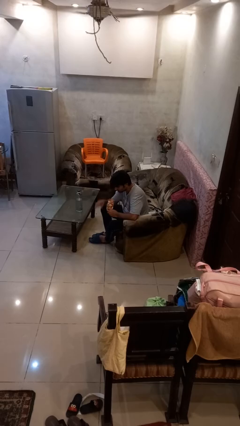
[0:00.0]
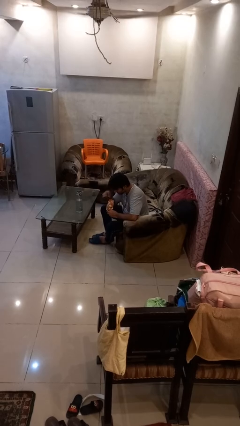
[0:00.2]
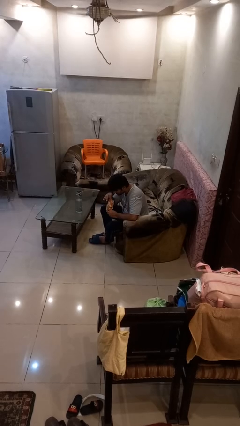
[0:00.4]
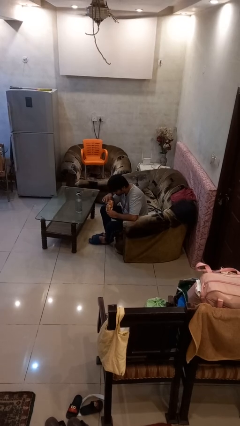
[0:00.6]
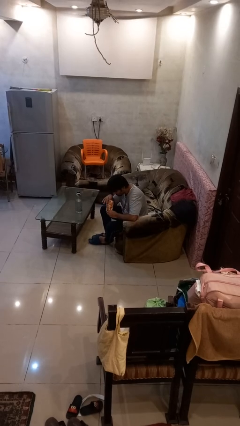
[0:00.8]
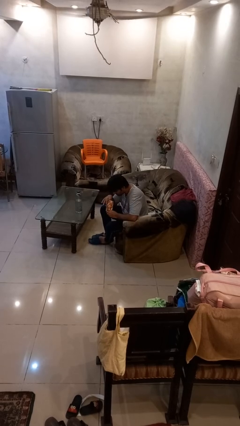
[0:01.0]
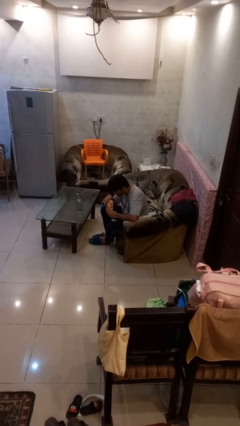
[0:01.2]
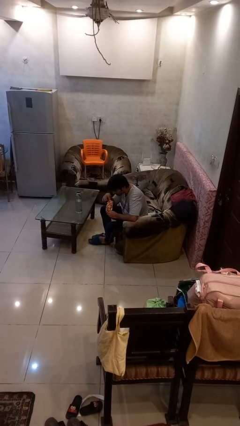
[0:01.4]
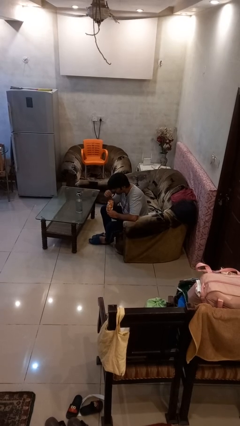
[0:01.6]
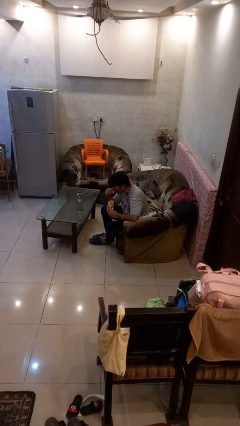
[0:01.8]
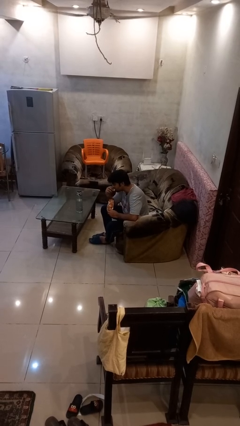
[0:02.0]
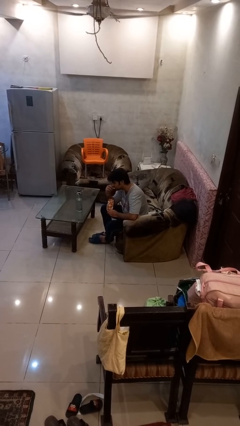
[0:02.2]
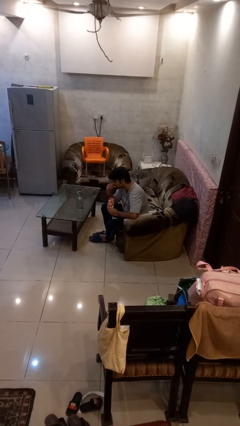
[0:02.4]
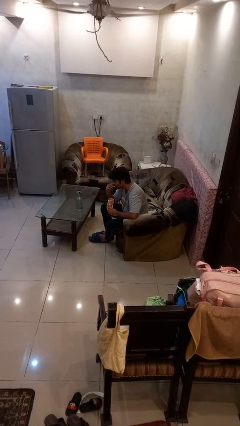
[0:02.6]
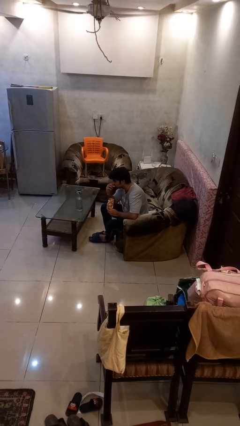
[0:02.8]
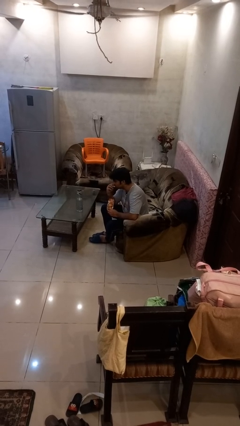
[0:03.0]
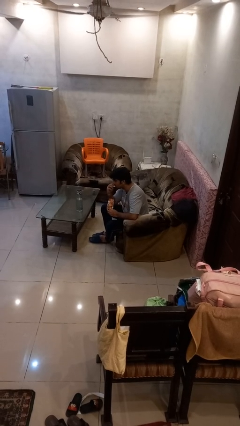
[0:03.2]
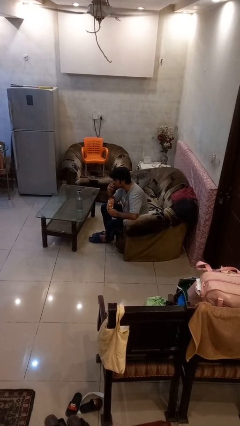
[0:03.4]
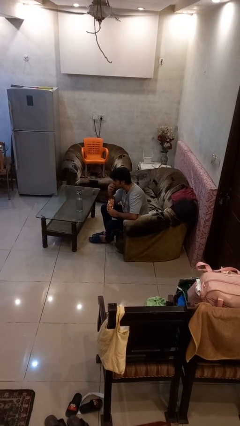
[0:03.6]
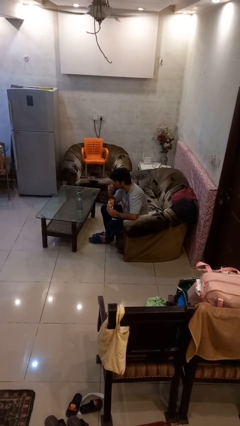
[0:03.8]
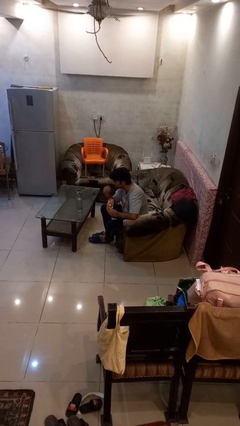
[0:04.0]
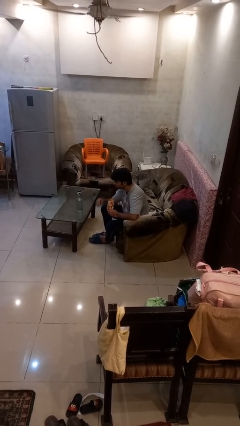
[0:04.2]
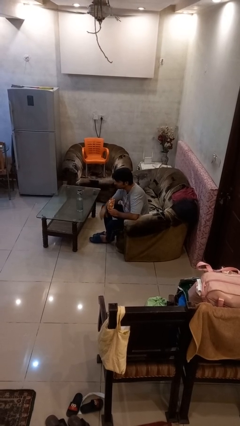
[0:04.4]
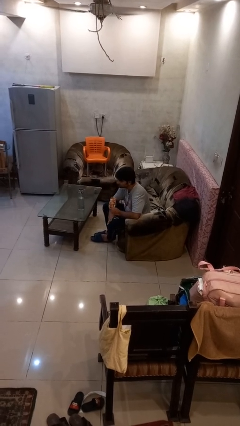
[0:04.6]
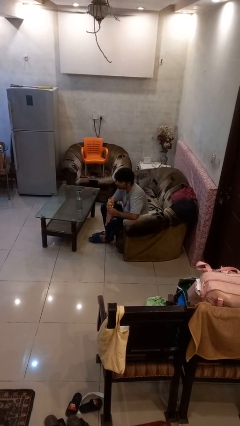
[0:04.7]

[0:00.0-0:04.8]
person eats snack from bag

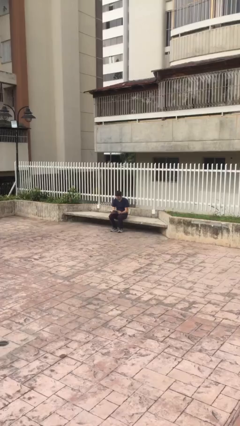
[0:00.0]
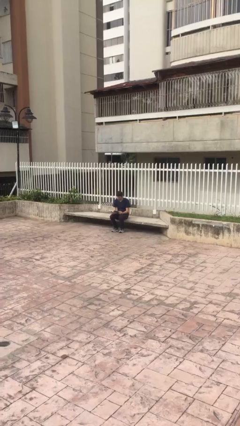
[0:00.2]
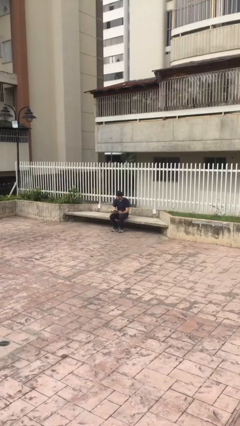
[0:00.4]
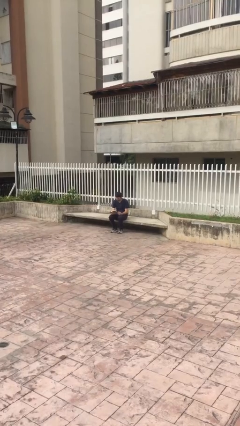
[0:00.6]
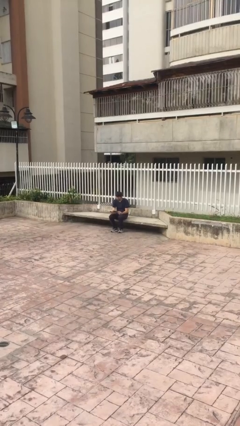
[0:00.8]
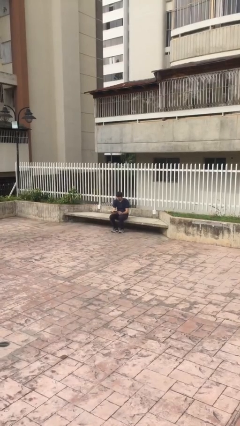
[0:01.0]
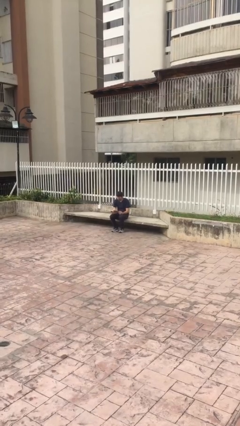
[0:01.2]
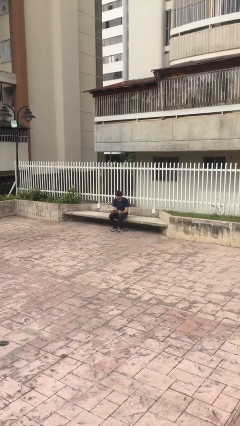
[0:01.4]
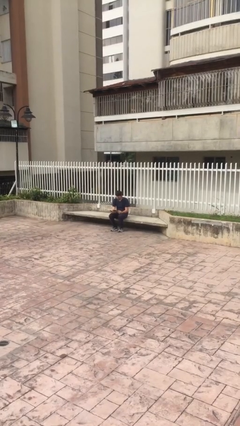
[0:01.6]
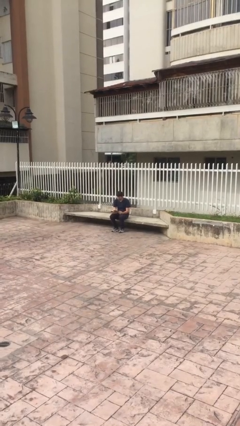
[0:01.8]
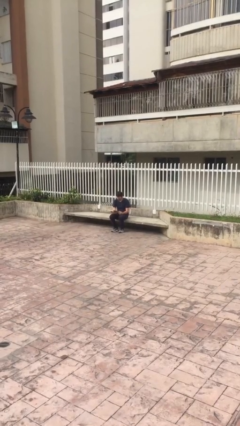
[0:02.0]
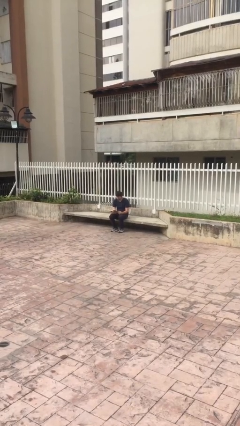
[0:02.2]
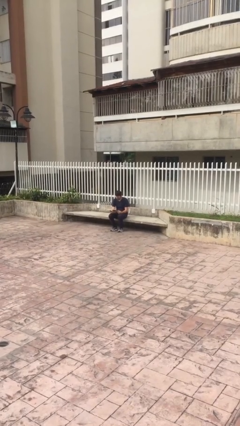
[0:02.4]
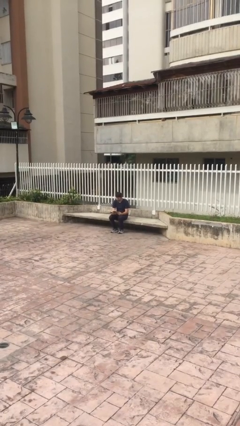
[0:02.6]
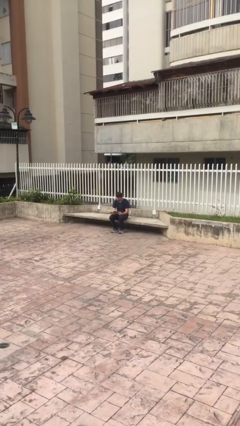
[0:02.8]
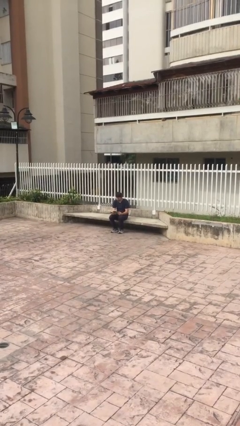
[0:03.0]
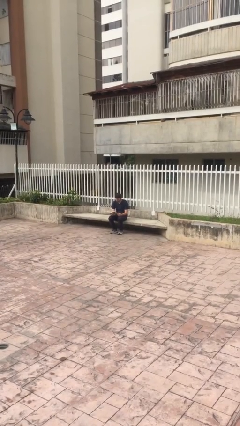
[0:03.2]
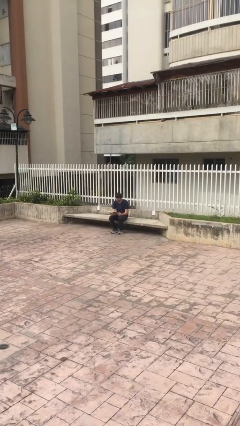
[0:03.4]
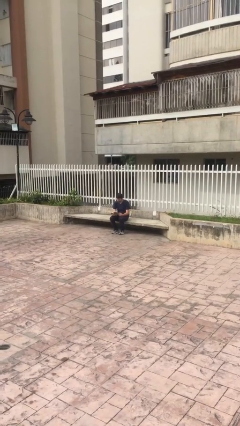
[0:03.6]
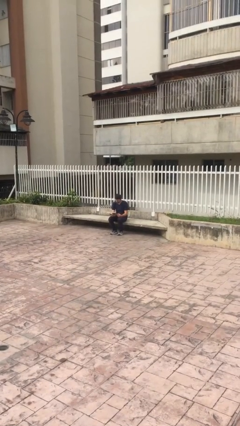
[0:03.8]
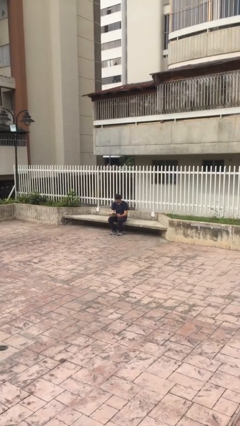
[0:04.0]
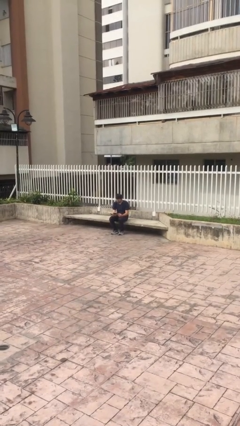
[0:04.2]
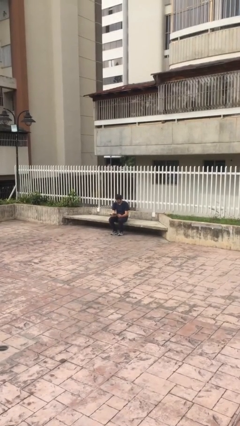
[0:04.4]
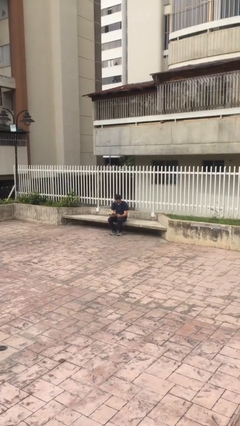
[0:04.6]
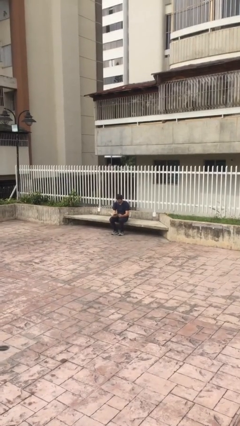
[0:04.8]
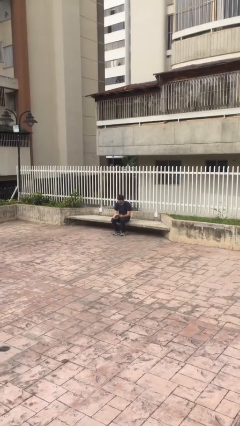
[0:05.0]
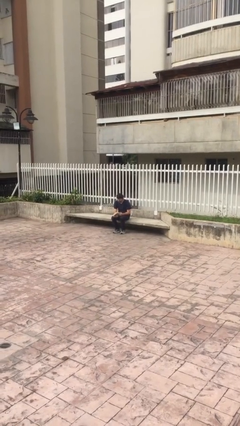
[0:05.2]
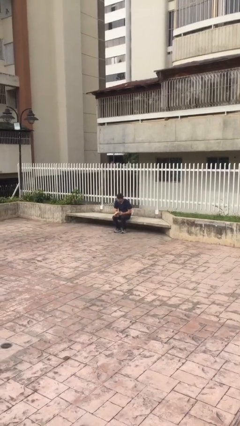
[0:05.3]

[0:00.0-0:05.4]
person reads document

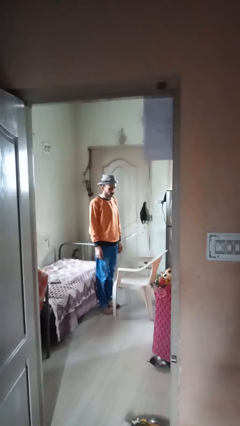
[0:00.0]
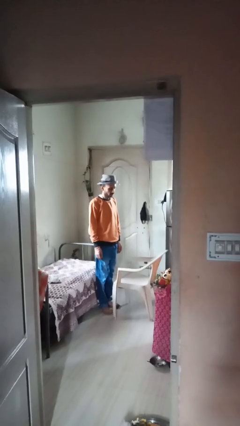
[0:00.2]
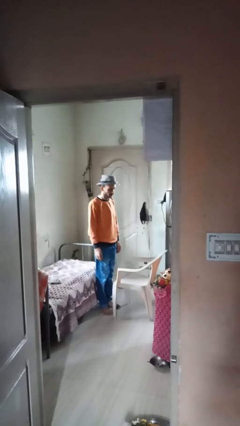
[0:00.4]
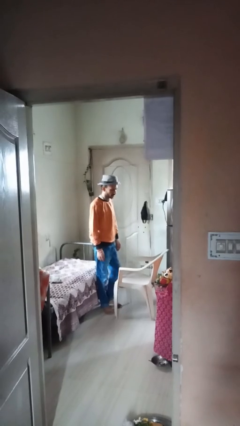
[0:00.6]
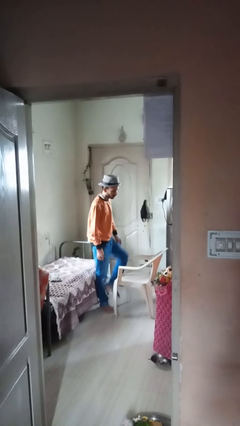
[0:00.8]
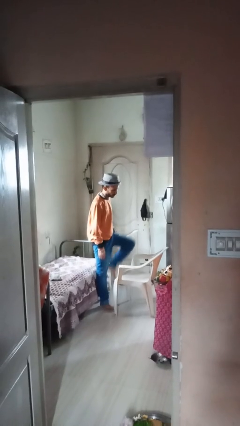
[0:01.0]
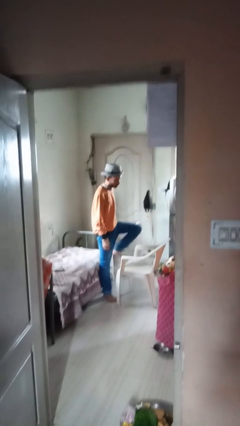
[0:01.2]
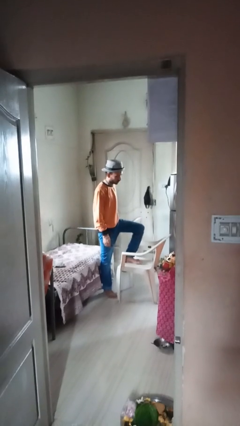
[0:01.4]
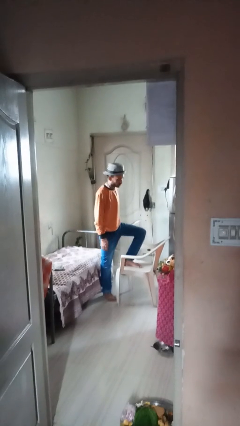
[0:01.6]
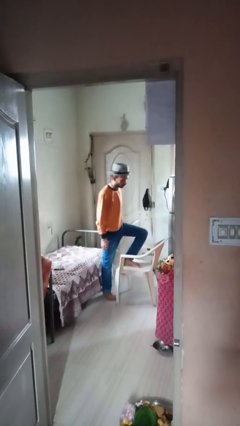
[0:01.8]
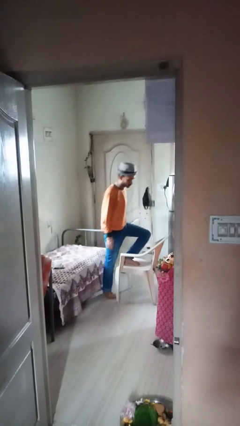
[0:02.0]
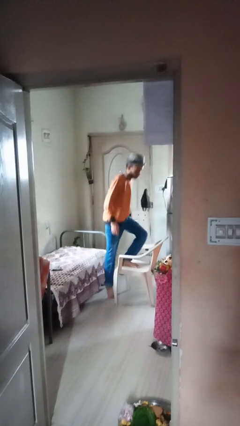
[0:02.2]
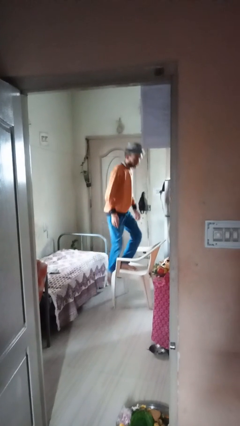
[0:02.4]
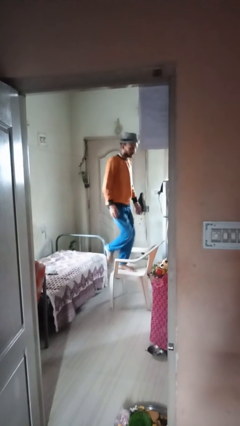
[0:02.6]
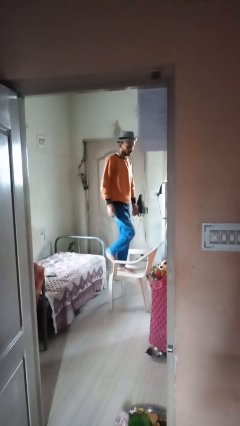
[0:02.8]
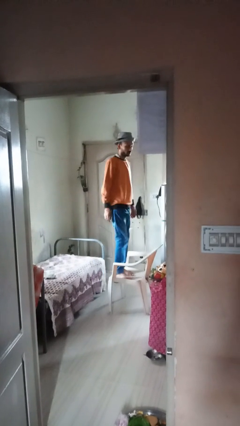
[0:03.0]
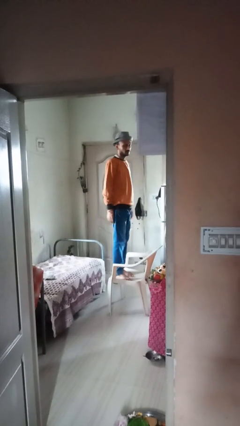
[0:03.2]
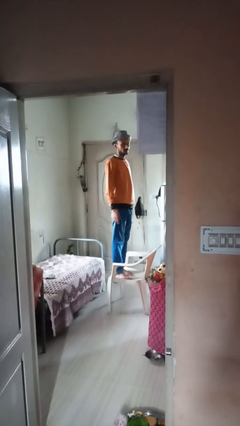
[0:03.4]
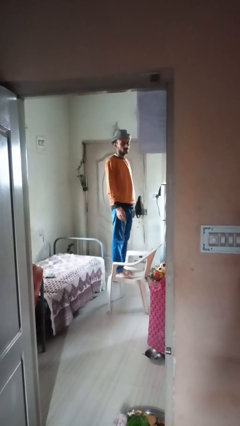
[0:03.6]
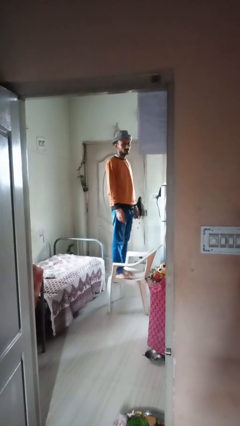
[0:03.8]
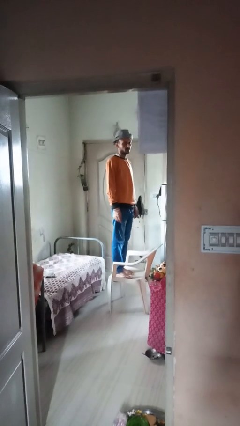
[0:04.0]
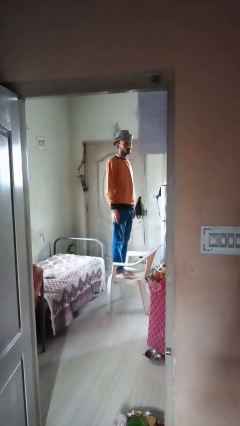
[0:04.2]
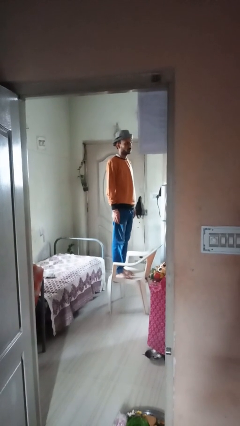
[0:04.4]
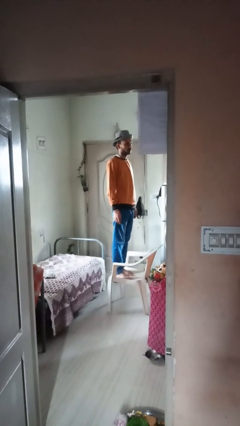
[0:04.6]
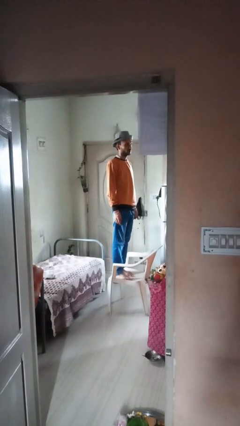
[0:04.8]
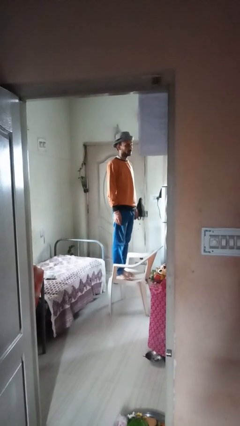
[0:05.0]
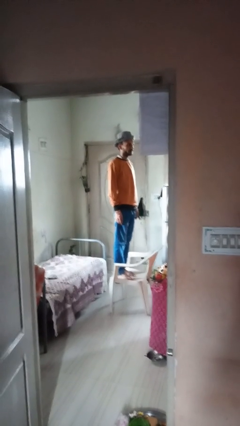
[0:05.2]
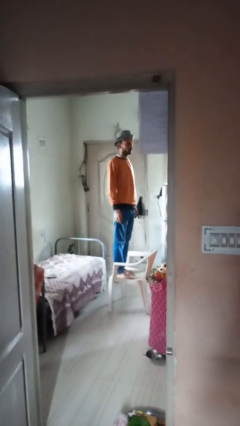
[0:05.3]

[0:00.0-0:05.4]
person climbs on chair

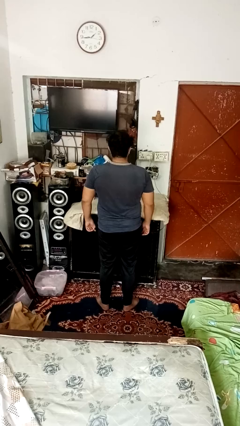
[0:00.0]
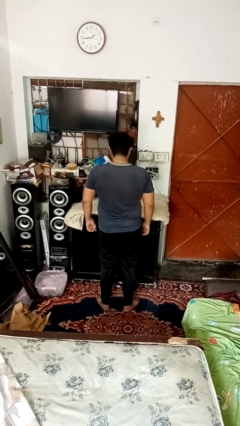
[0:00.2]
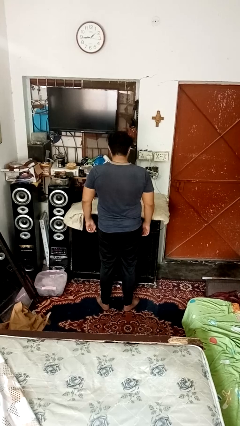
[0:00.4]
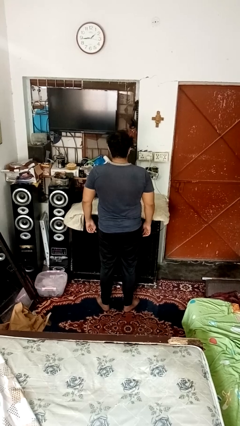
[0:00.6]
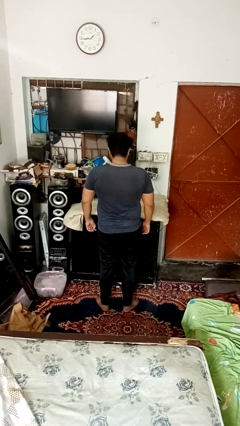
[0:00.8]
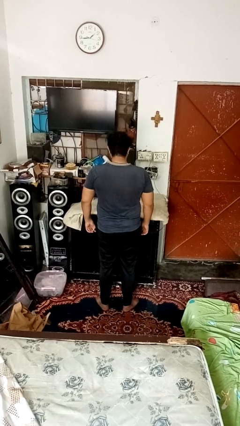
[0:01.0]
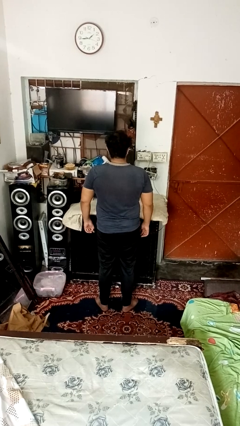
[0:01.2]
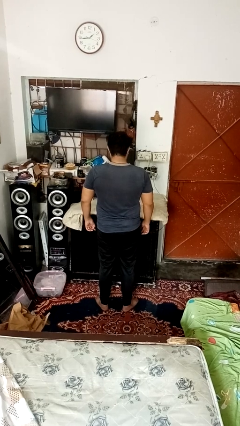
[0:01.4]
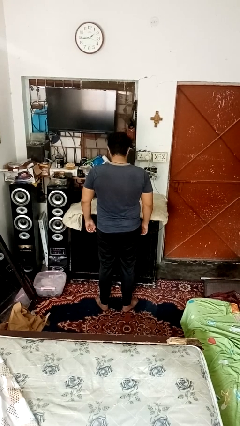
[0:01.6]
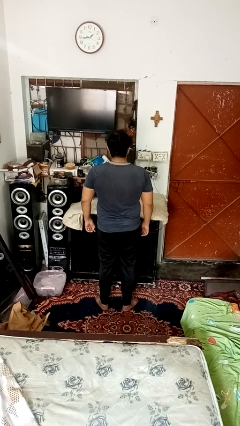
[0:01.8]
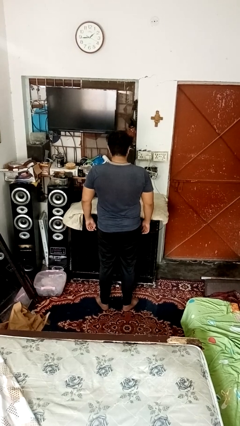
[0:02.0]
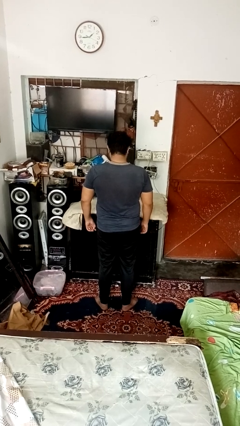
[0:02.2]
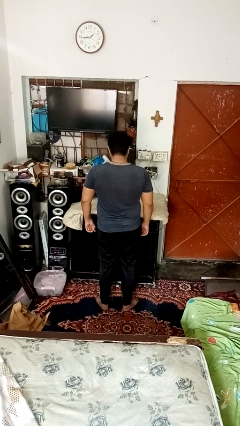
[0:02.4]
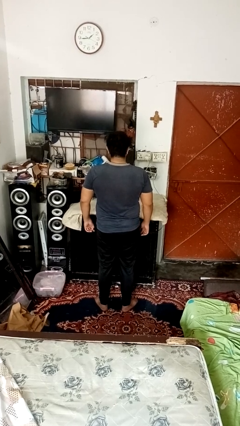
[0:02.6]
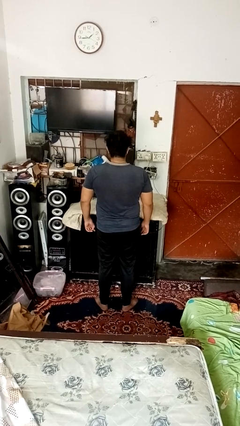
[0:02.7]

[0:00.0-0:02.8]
person nods head
